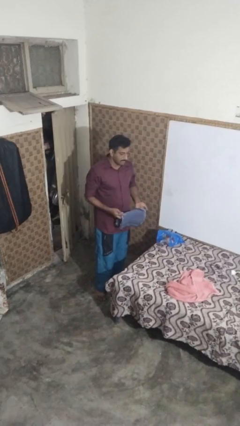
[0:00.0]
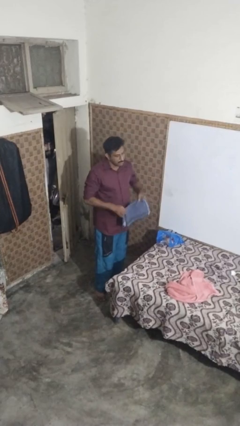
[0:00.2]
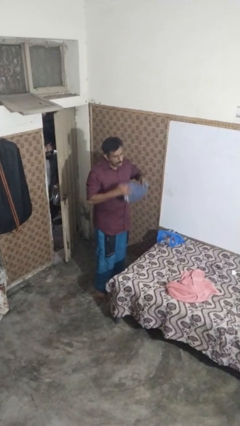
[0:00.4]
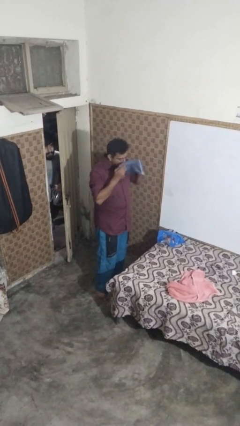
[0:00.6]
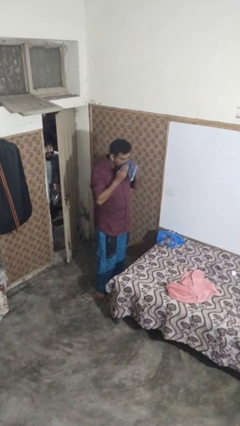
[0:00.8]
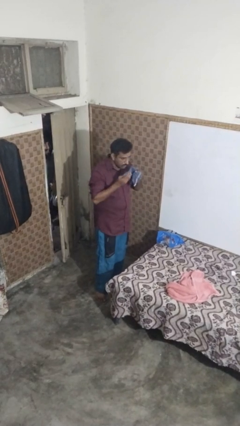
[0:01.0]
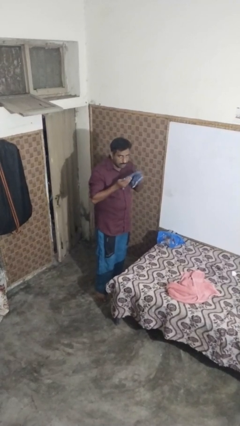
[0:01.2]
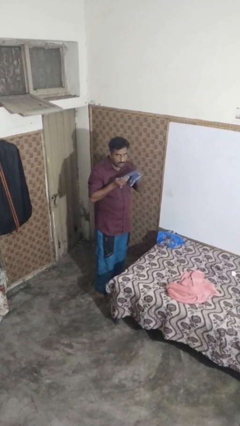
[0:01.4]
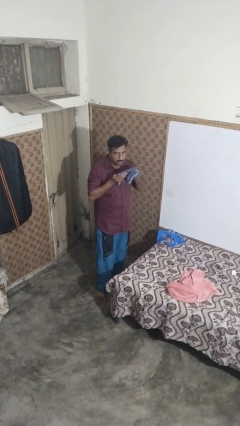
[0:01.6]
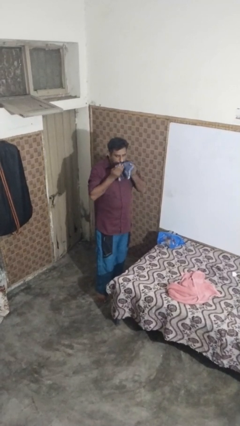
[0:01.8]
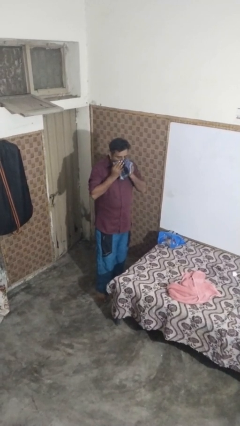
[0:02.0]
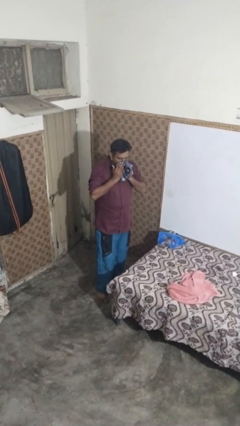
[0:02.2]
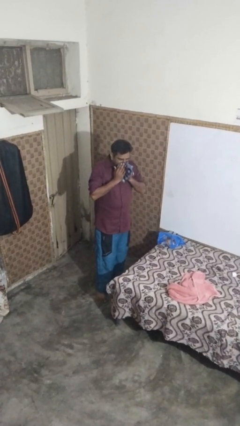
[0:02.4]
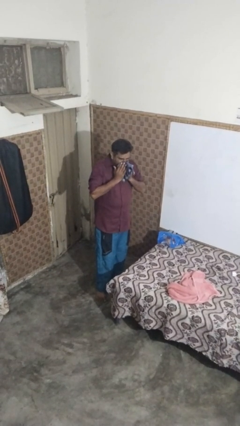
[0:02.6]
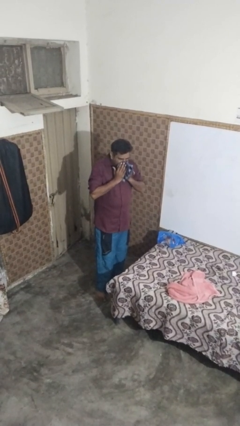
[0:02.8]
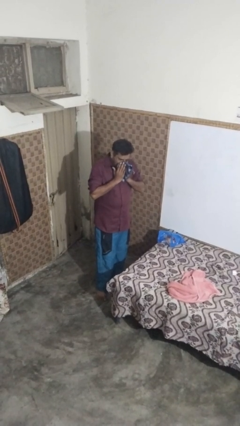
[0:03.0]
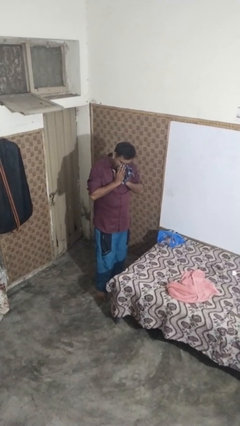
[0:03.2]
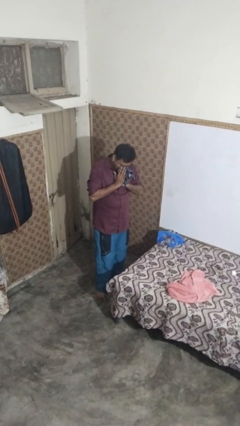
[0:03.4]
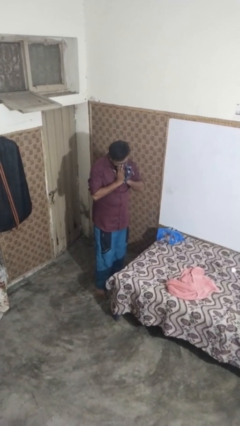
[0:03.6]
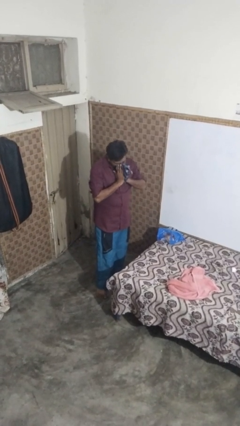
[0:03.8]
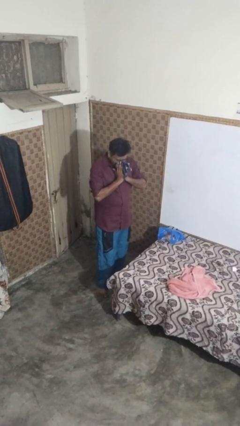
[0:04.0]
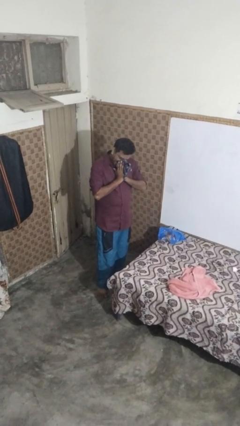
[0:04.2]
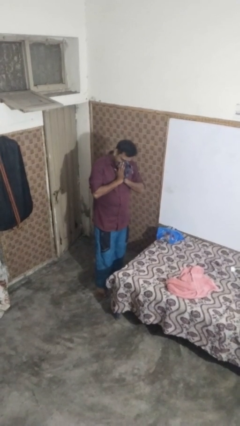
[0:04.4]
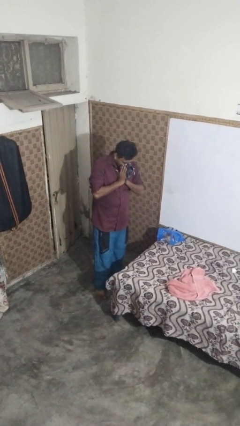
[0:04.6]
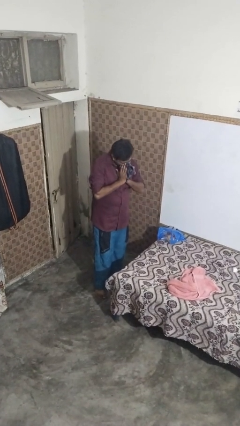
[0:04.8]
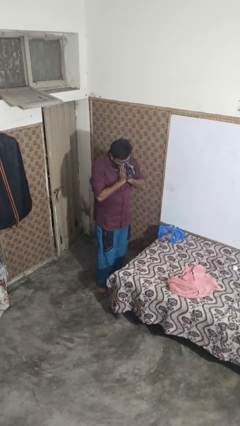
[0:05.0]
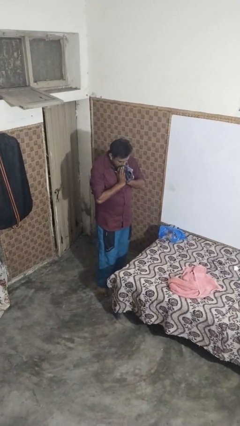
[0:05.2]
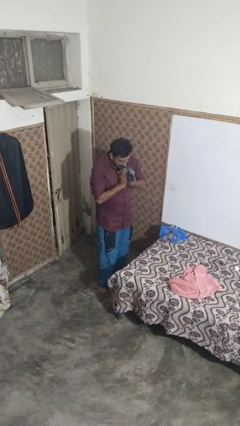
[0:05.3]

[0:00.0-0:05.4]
person blows nose

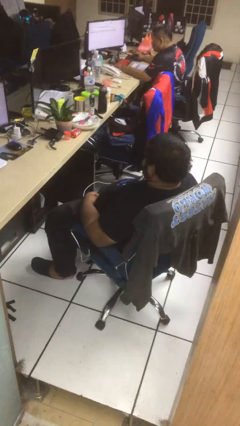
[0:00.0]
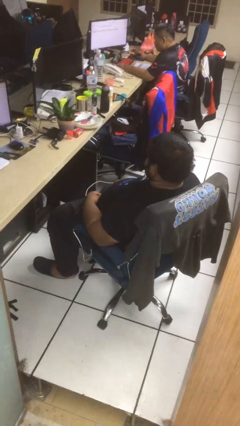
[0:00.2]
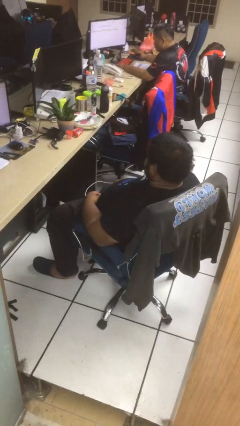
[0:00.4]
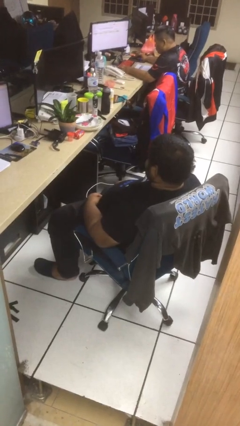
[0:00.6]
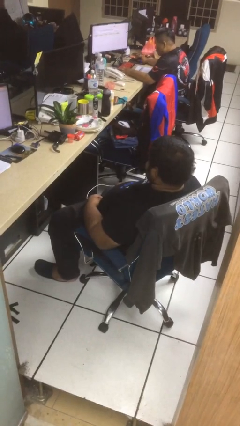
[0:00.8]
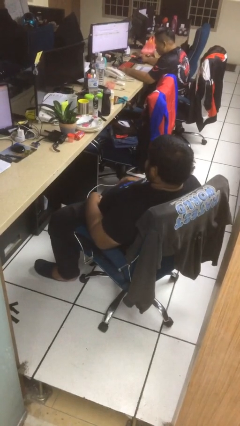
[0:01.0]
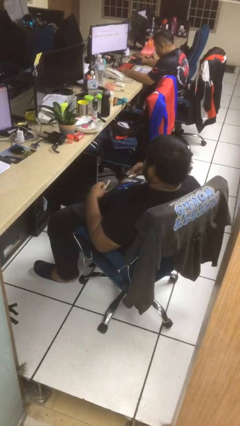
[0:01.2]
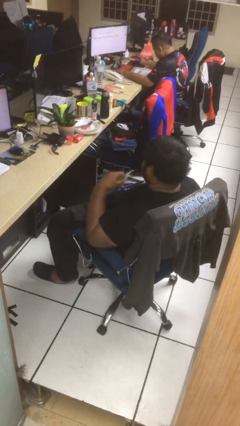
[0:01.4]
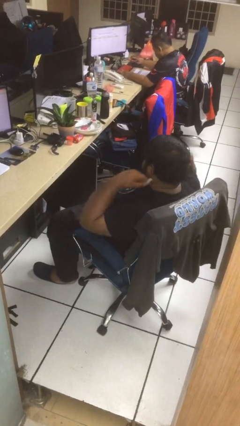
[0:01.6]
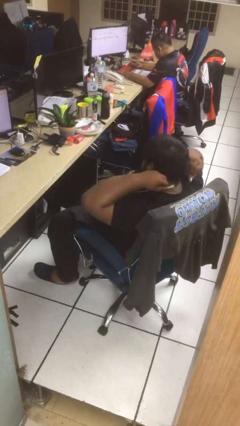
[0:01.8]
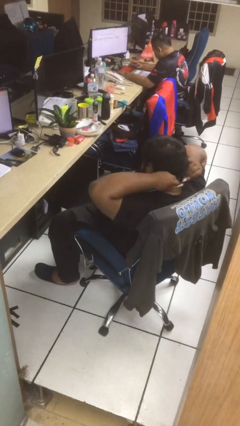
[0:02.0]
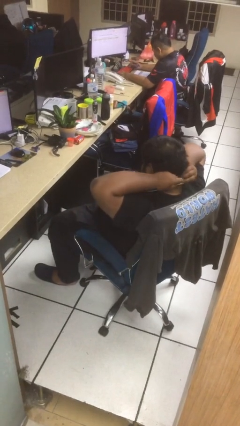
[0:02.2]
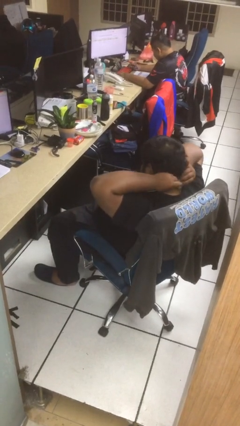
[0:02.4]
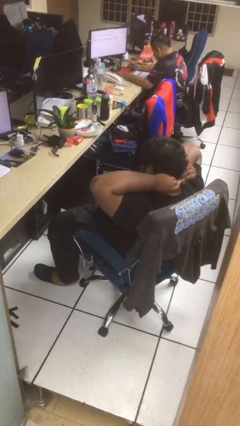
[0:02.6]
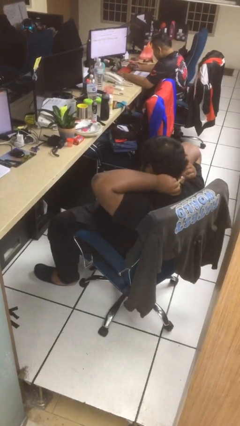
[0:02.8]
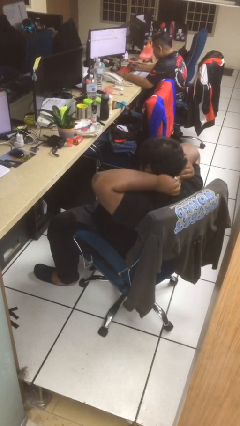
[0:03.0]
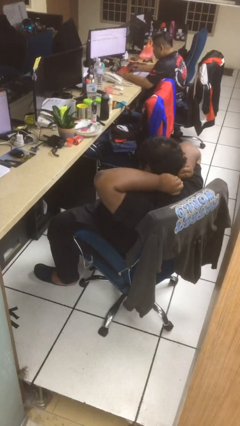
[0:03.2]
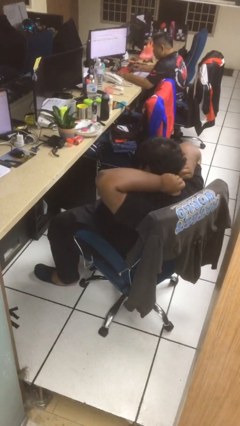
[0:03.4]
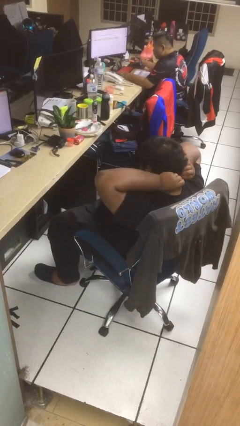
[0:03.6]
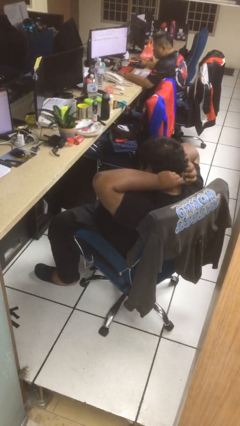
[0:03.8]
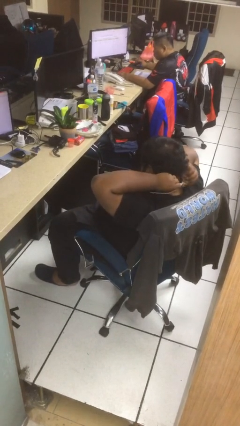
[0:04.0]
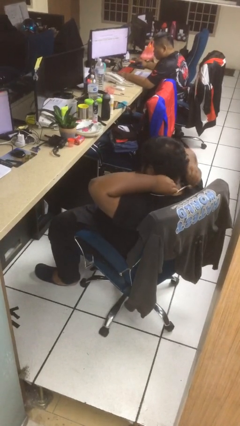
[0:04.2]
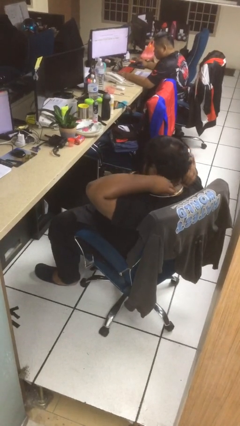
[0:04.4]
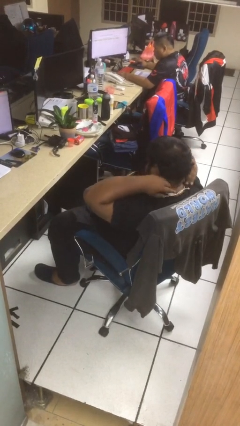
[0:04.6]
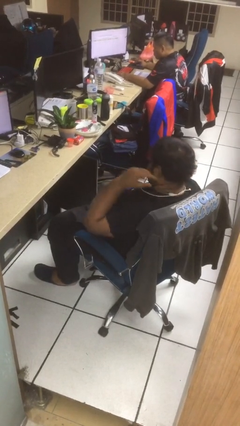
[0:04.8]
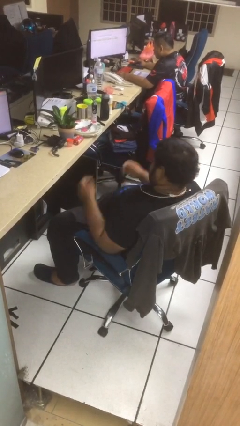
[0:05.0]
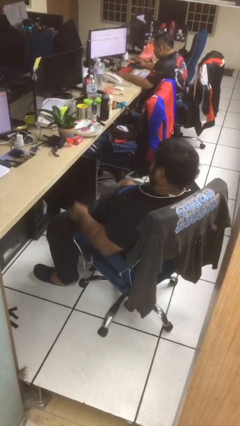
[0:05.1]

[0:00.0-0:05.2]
person puts on necklace

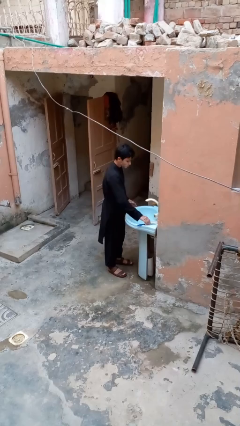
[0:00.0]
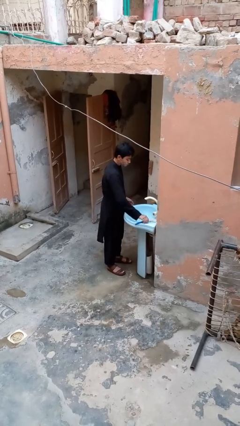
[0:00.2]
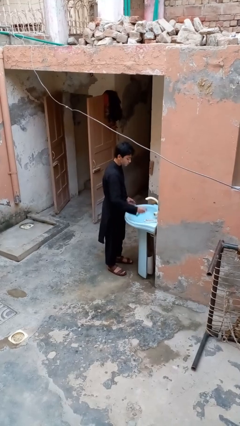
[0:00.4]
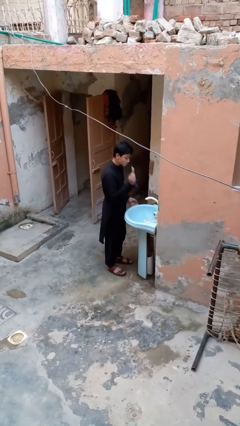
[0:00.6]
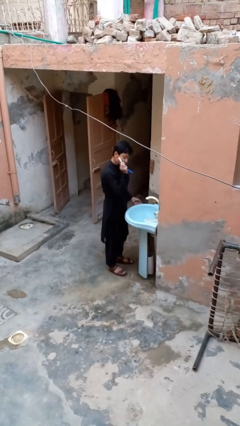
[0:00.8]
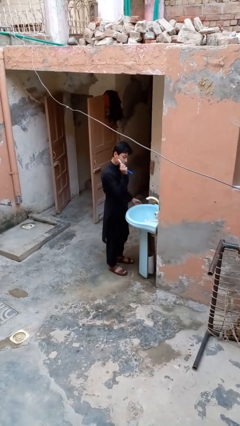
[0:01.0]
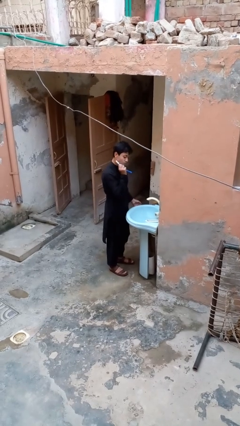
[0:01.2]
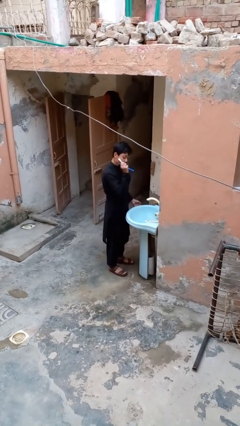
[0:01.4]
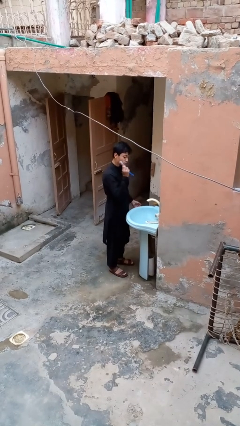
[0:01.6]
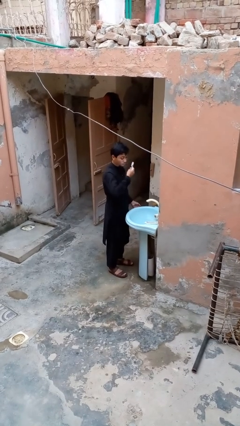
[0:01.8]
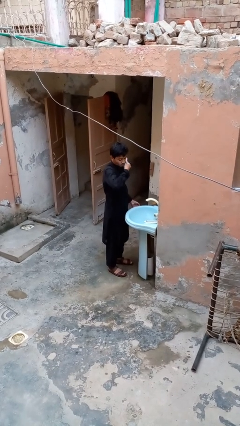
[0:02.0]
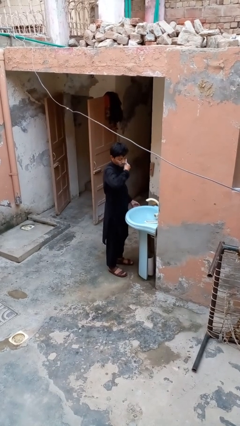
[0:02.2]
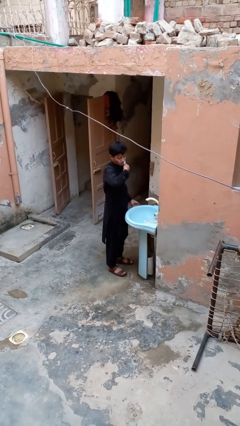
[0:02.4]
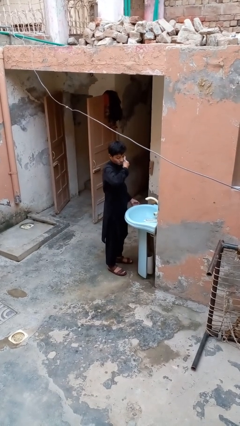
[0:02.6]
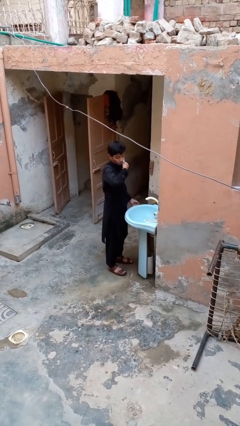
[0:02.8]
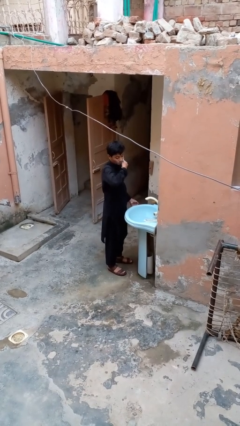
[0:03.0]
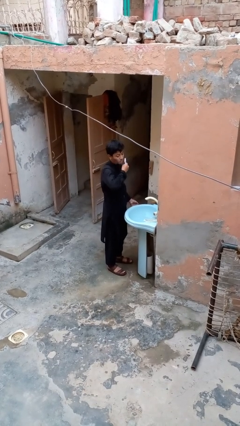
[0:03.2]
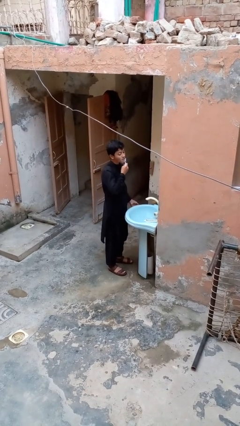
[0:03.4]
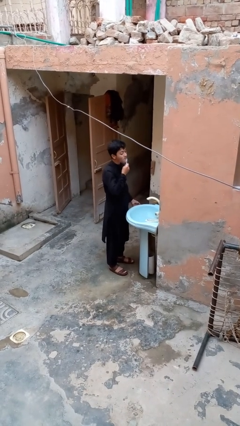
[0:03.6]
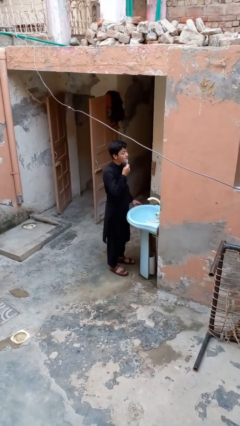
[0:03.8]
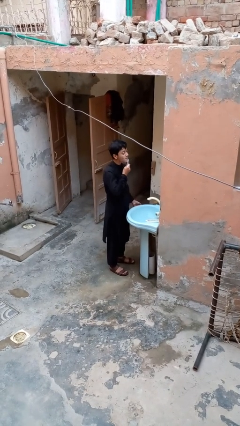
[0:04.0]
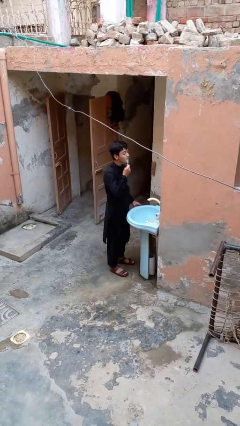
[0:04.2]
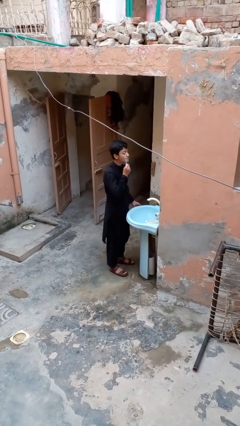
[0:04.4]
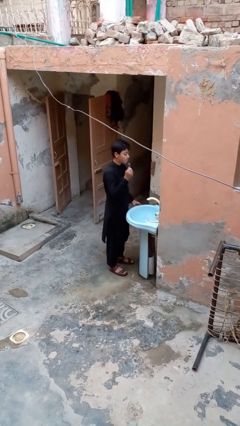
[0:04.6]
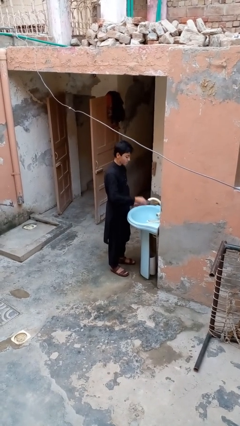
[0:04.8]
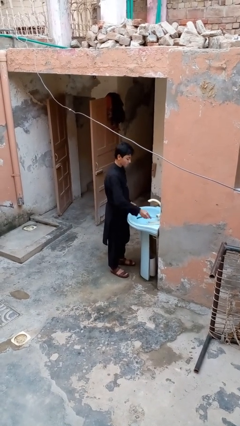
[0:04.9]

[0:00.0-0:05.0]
person shaves face

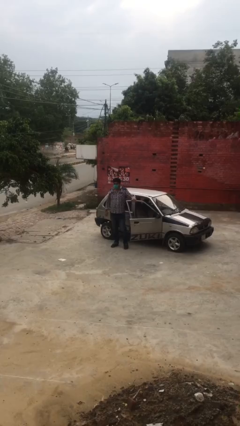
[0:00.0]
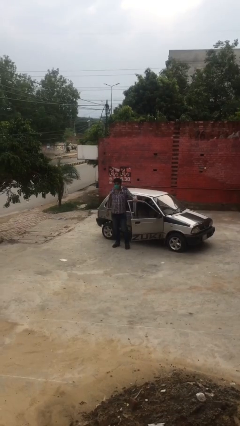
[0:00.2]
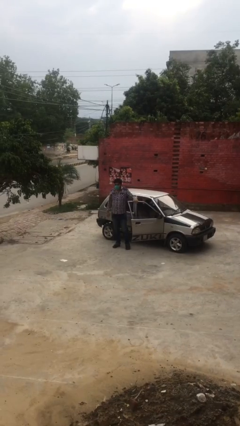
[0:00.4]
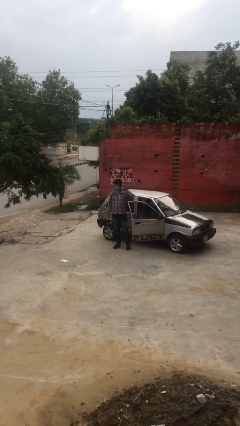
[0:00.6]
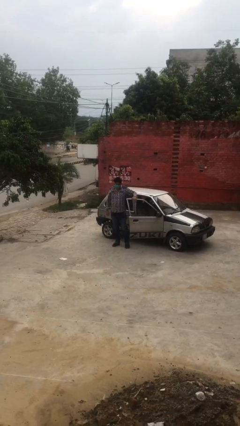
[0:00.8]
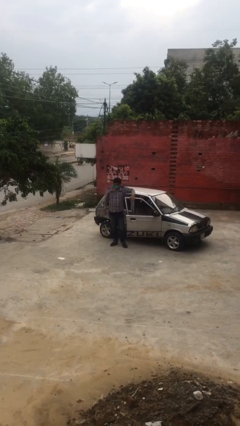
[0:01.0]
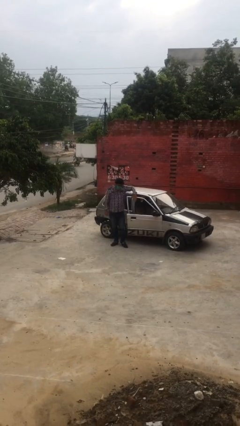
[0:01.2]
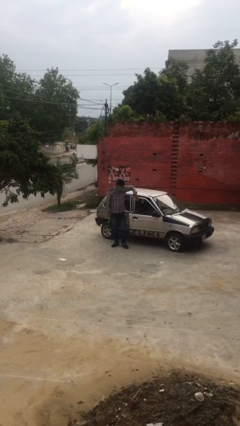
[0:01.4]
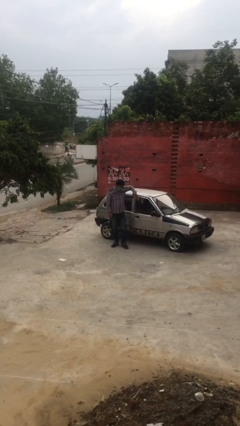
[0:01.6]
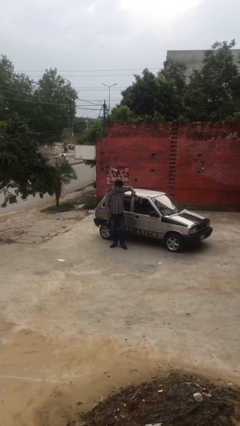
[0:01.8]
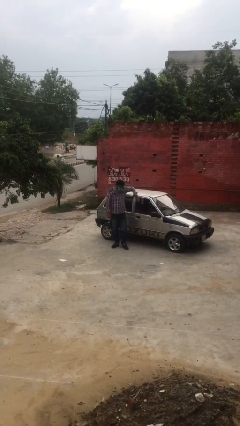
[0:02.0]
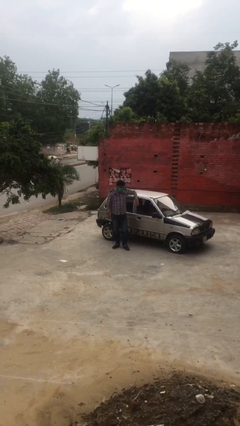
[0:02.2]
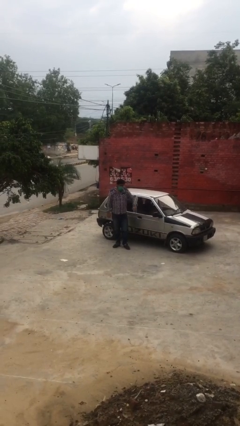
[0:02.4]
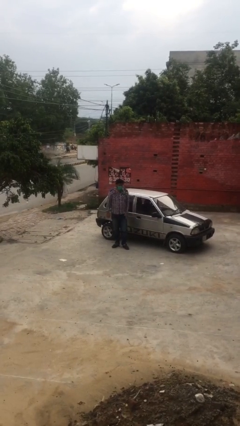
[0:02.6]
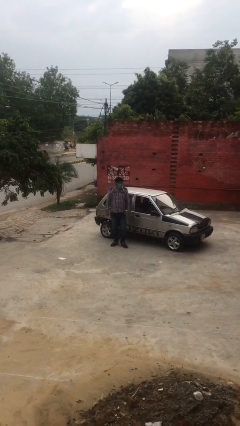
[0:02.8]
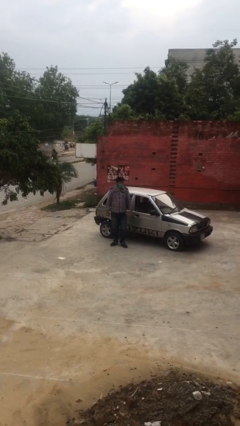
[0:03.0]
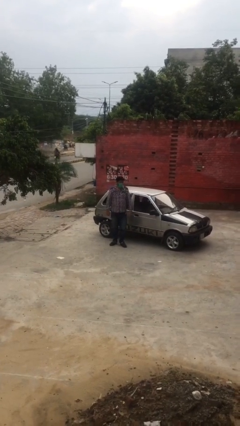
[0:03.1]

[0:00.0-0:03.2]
person closes car door
